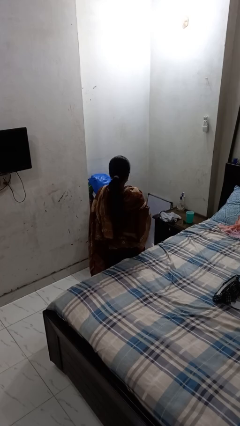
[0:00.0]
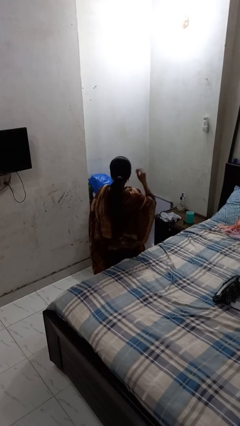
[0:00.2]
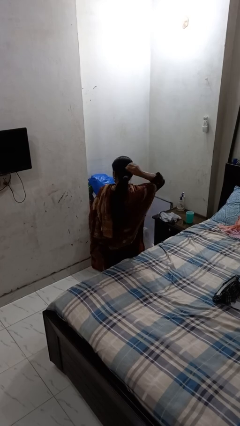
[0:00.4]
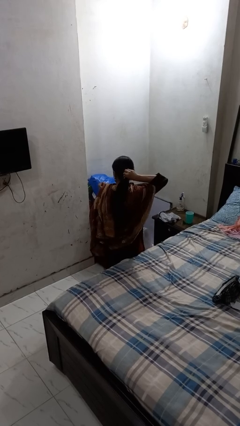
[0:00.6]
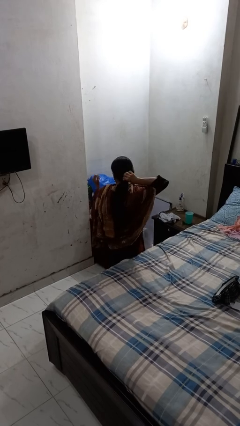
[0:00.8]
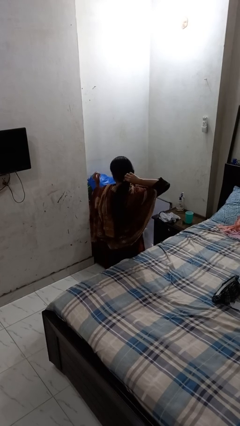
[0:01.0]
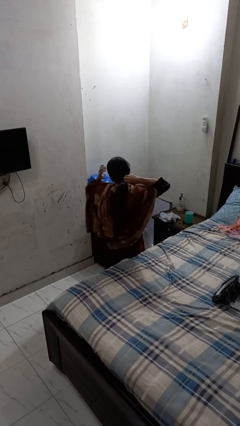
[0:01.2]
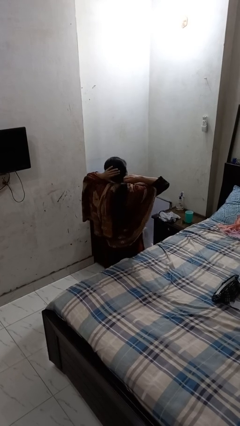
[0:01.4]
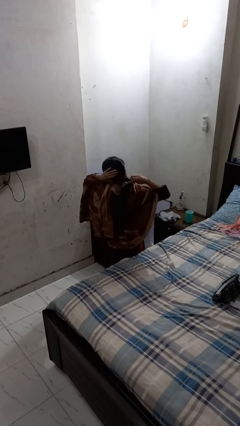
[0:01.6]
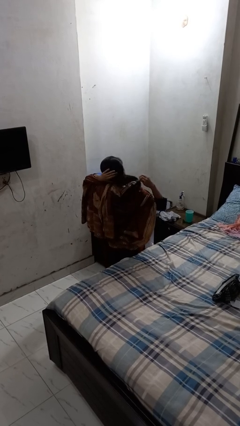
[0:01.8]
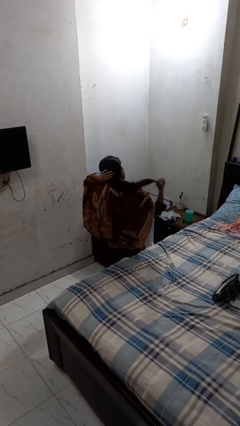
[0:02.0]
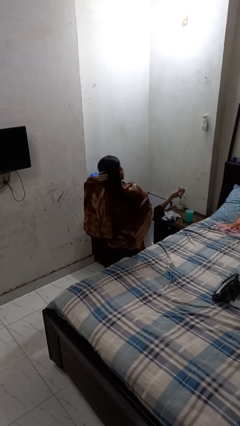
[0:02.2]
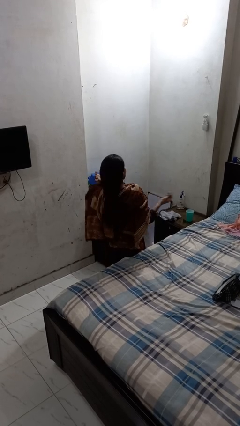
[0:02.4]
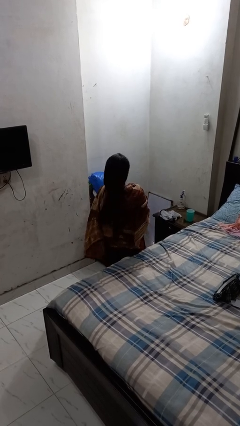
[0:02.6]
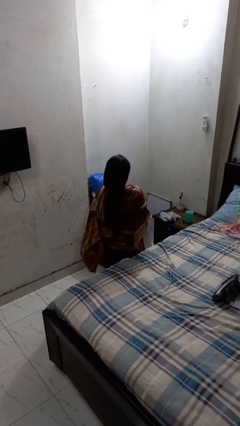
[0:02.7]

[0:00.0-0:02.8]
person takes off hairtie

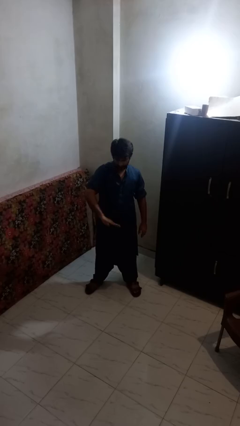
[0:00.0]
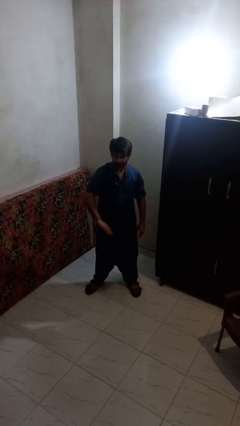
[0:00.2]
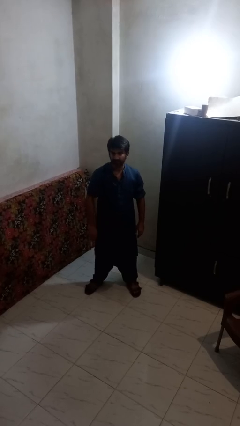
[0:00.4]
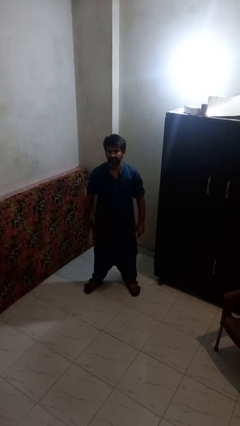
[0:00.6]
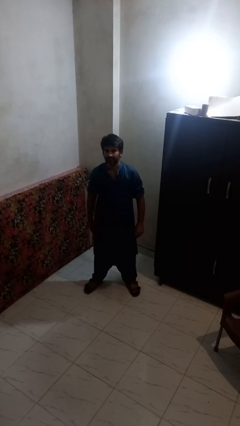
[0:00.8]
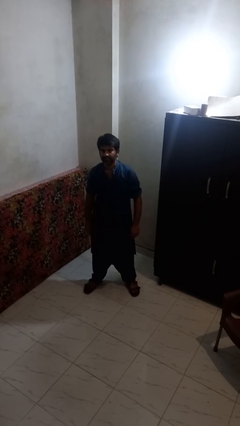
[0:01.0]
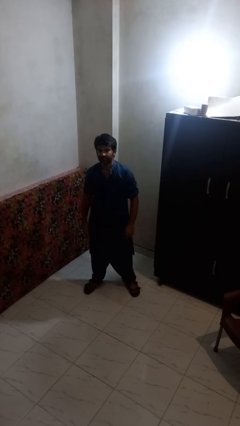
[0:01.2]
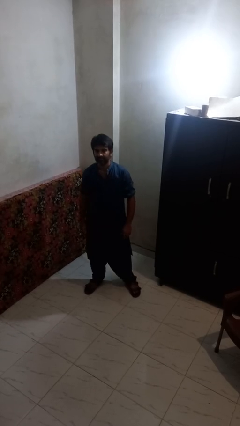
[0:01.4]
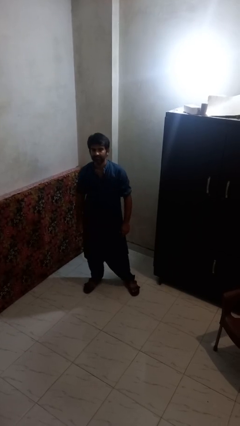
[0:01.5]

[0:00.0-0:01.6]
person gestures swipe down

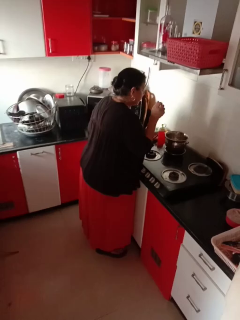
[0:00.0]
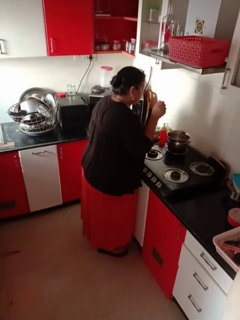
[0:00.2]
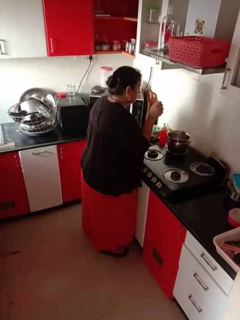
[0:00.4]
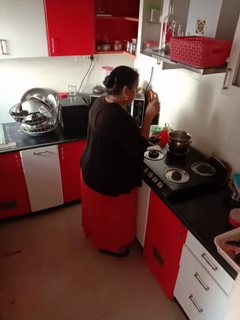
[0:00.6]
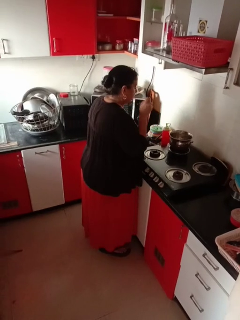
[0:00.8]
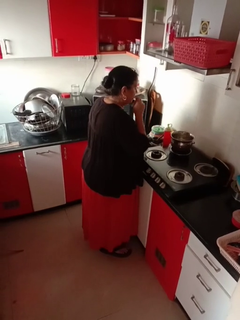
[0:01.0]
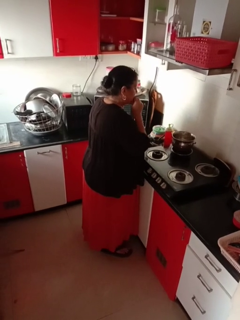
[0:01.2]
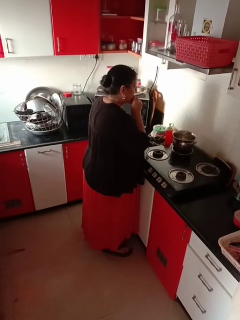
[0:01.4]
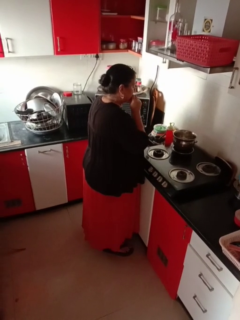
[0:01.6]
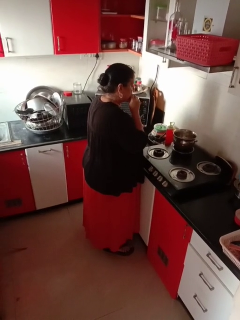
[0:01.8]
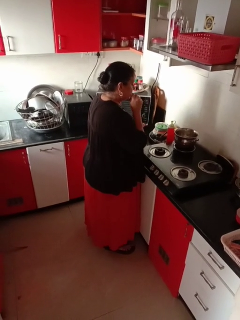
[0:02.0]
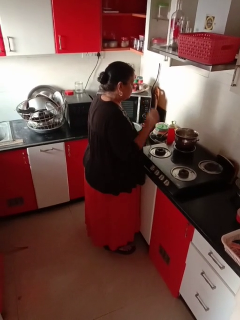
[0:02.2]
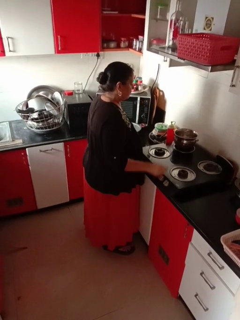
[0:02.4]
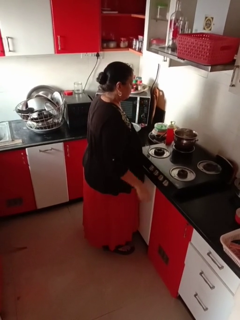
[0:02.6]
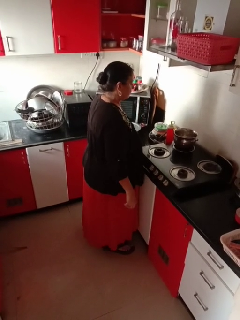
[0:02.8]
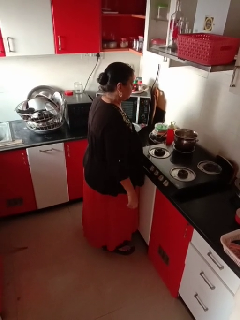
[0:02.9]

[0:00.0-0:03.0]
person burns hand

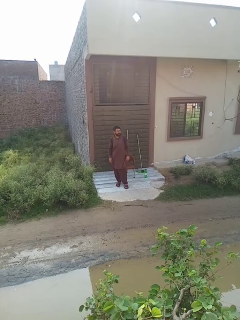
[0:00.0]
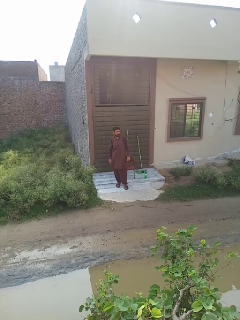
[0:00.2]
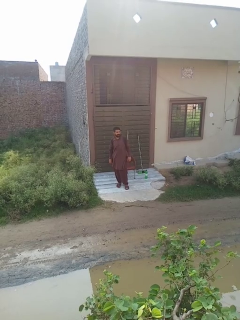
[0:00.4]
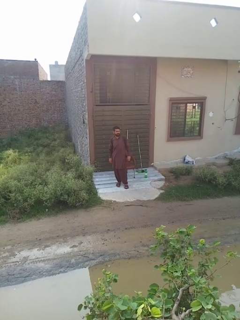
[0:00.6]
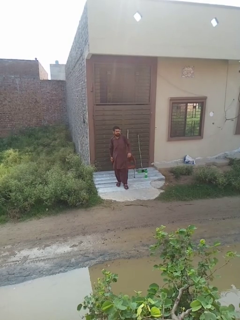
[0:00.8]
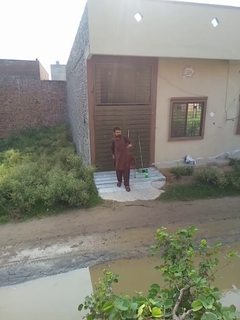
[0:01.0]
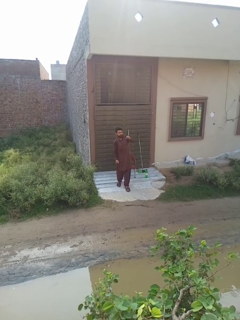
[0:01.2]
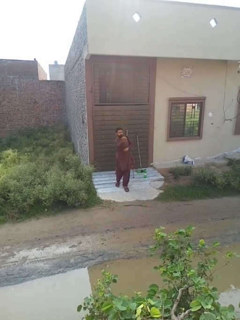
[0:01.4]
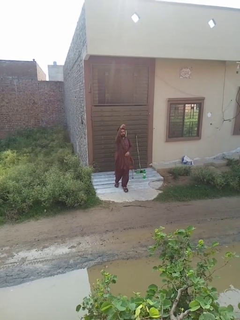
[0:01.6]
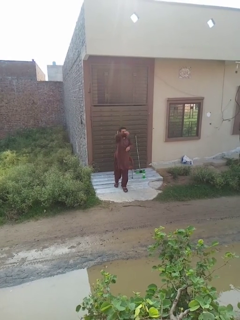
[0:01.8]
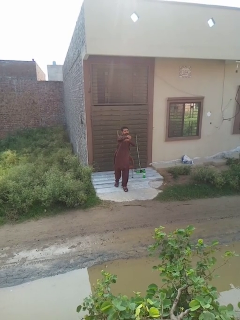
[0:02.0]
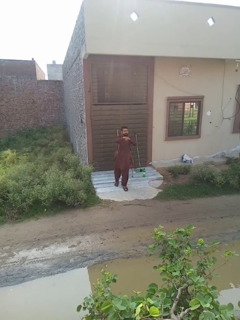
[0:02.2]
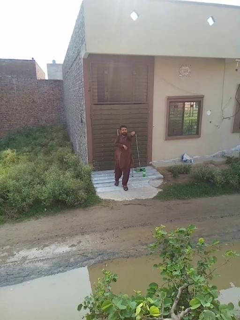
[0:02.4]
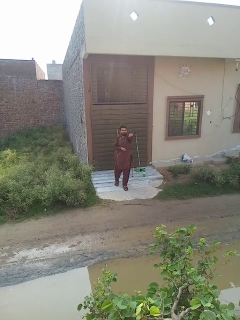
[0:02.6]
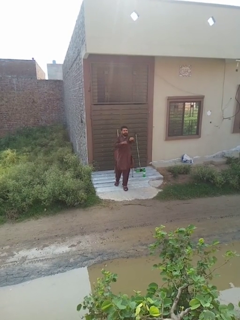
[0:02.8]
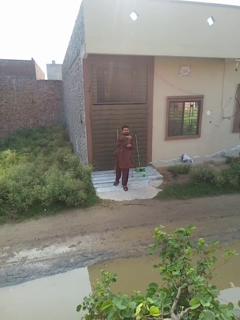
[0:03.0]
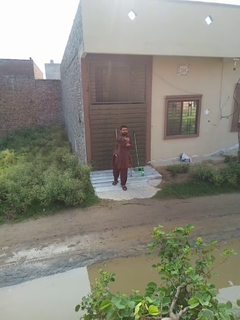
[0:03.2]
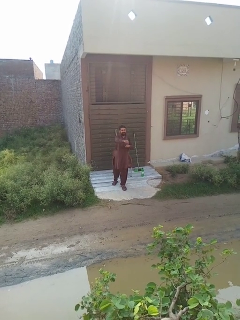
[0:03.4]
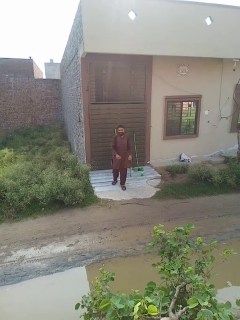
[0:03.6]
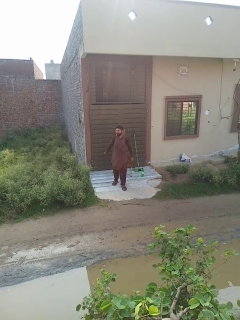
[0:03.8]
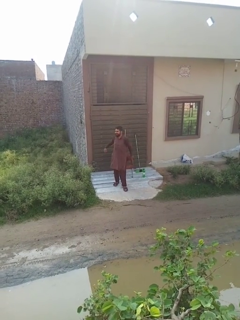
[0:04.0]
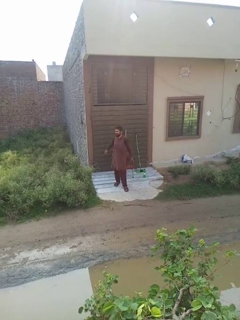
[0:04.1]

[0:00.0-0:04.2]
person punches

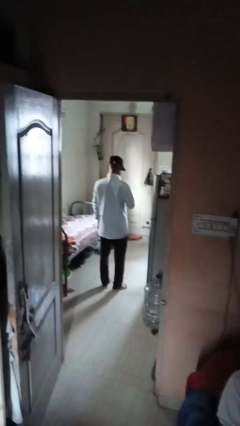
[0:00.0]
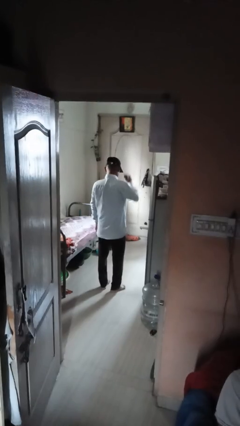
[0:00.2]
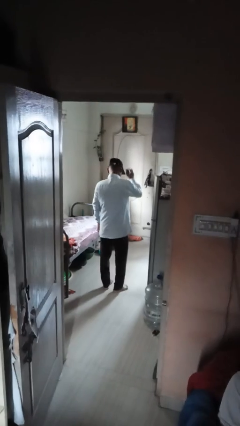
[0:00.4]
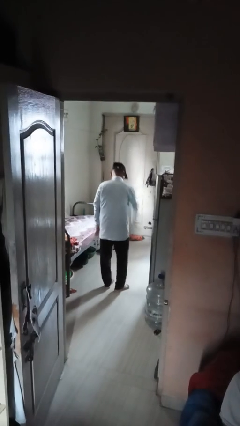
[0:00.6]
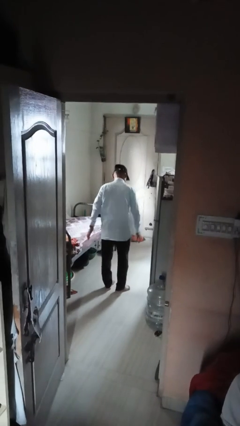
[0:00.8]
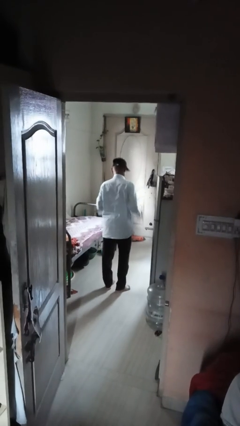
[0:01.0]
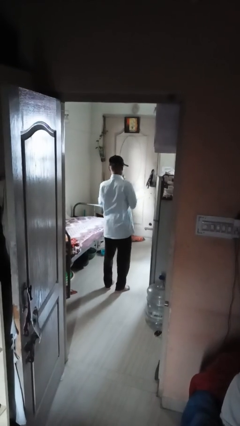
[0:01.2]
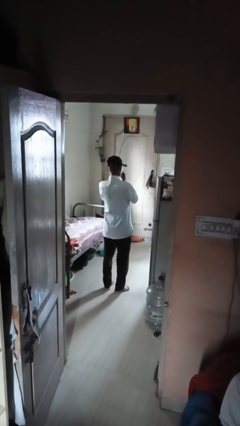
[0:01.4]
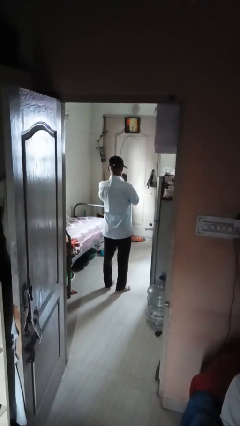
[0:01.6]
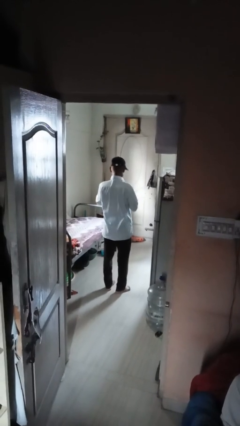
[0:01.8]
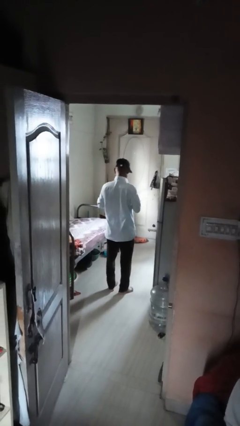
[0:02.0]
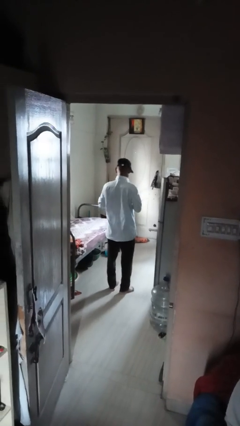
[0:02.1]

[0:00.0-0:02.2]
person bounces ball on floor

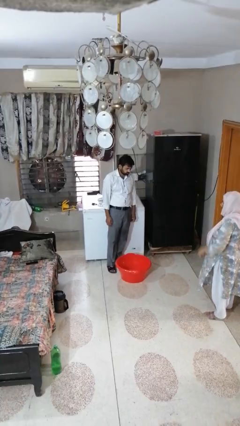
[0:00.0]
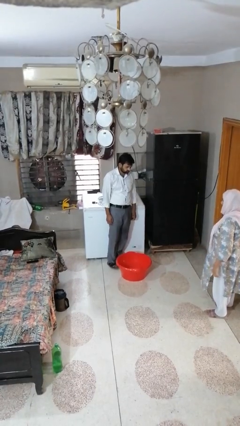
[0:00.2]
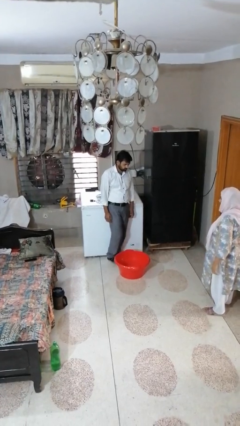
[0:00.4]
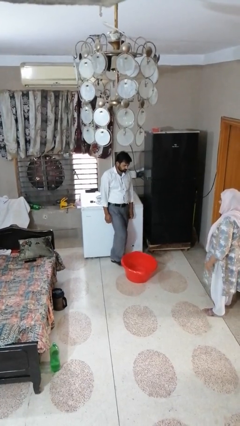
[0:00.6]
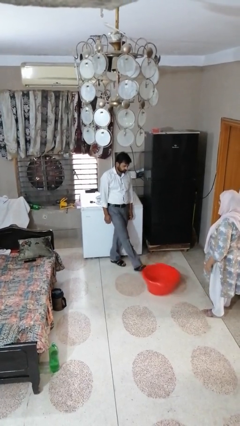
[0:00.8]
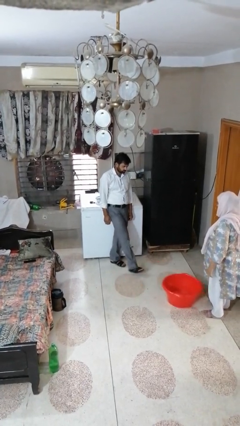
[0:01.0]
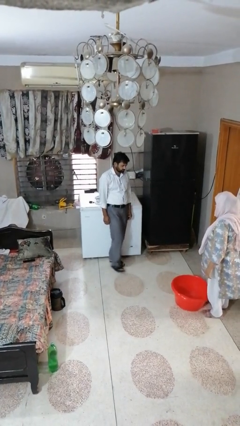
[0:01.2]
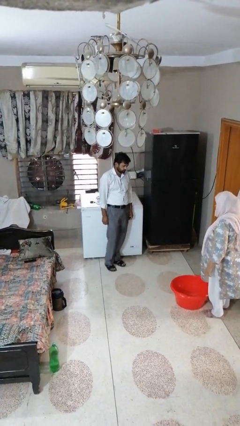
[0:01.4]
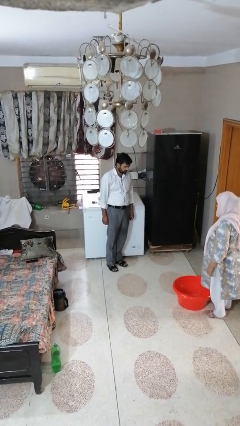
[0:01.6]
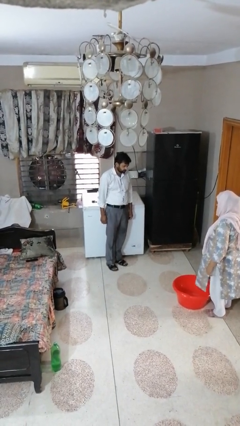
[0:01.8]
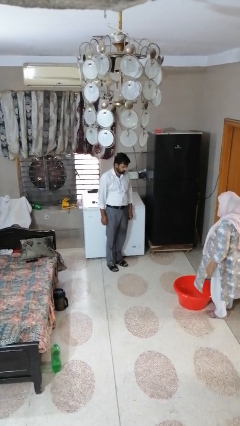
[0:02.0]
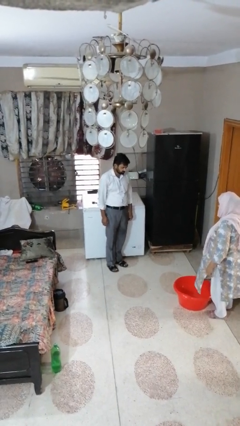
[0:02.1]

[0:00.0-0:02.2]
person kicks object to person

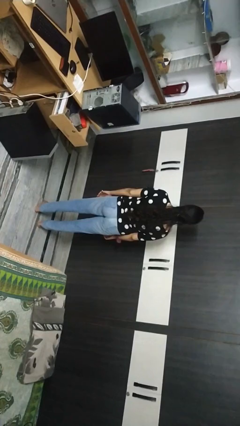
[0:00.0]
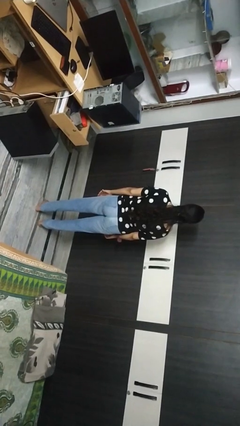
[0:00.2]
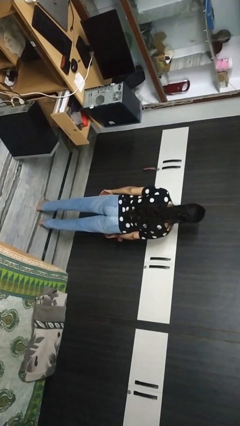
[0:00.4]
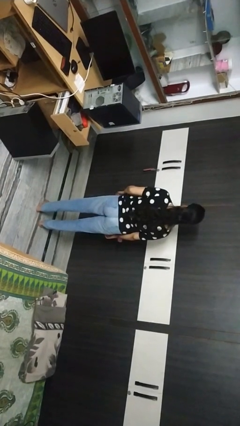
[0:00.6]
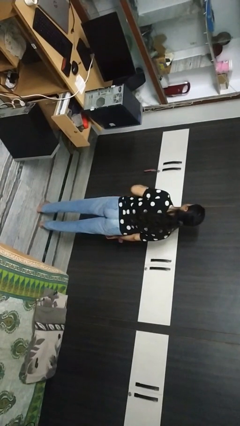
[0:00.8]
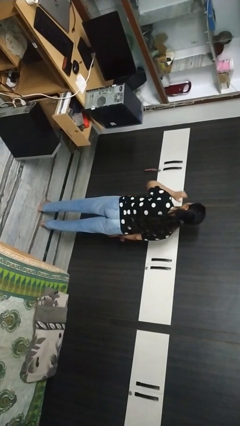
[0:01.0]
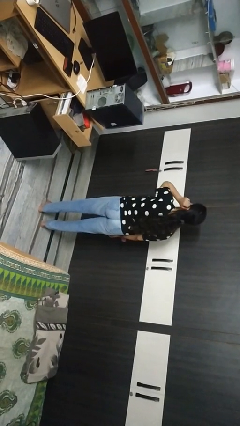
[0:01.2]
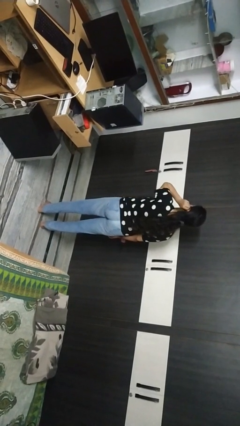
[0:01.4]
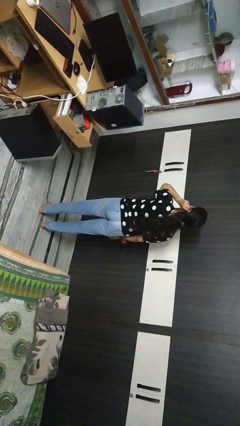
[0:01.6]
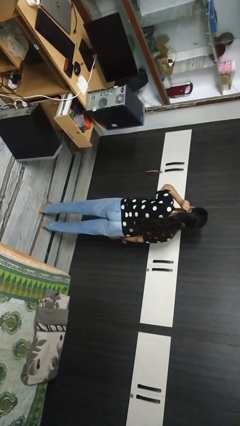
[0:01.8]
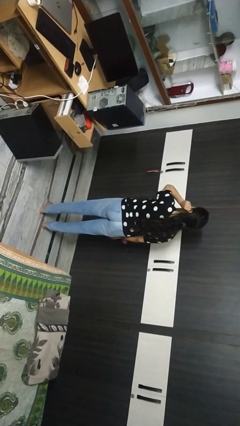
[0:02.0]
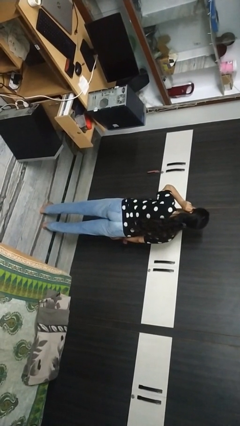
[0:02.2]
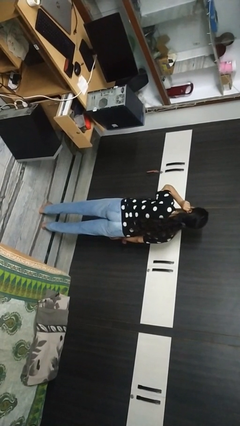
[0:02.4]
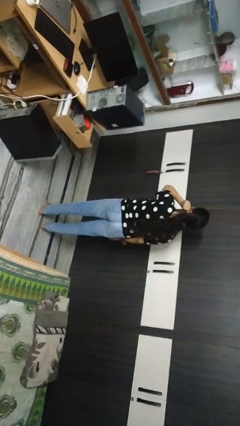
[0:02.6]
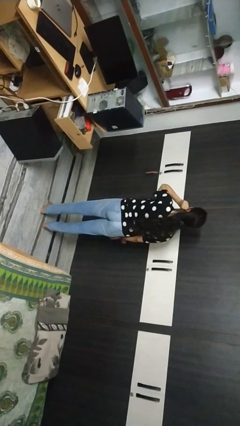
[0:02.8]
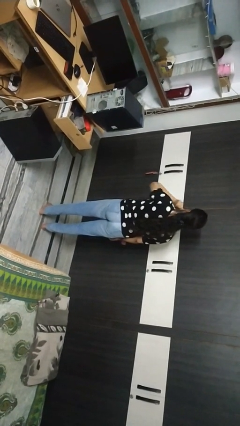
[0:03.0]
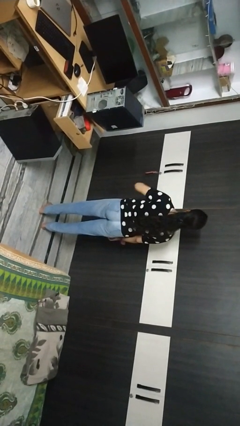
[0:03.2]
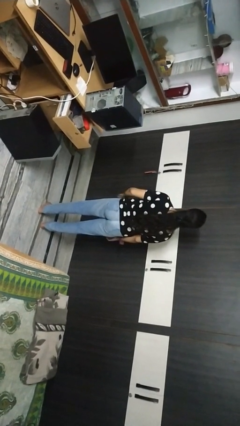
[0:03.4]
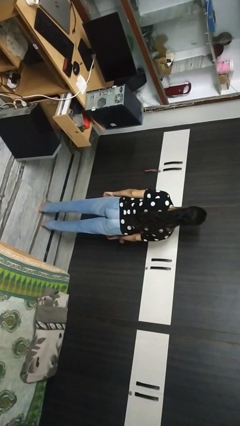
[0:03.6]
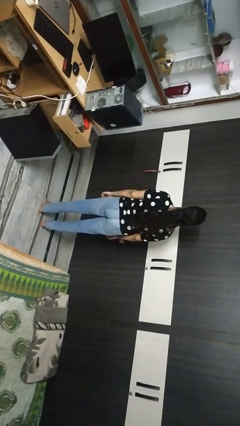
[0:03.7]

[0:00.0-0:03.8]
person touches earlobe
